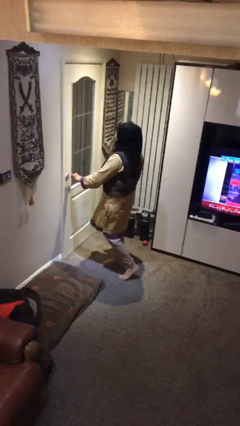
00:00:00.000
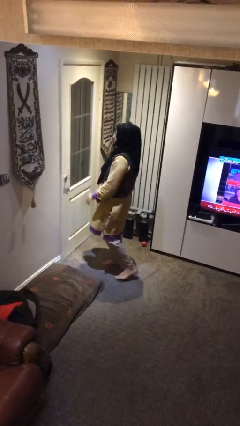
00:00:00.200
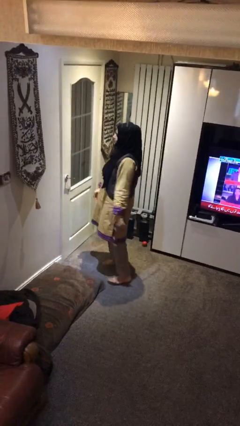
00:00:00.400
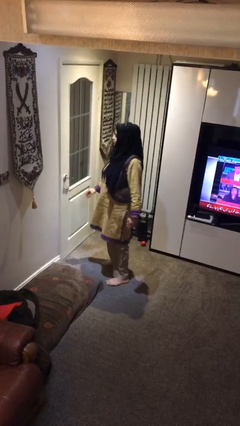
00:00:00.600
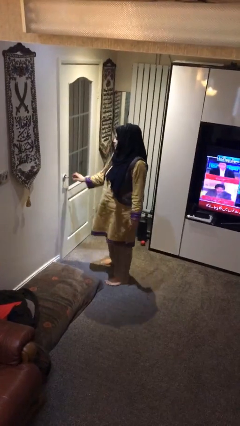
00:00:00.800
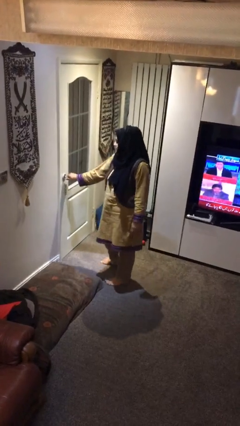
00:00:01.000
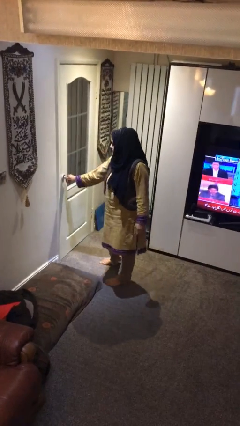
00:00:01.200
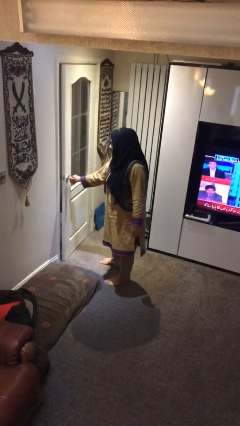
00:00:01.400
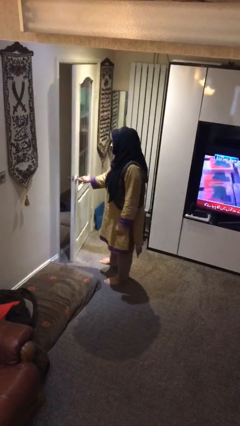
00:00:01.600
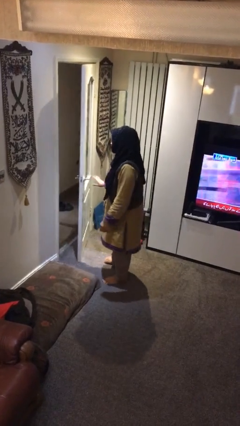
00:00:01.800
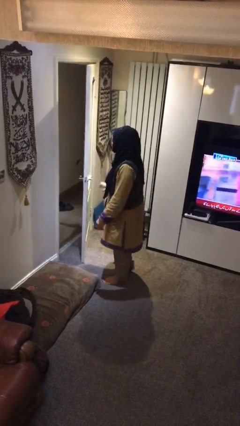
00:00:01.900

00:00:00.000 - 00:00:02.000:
person opens facility door

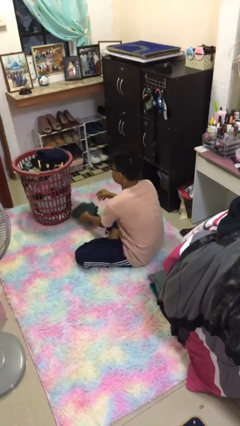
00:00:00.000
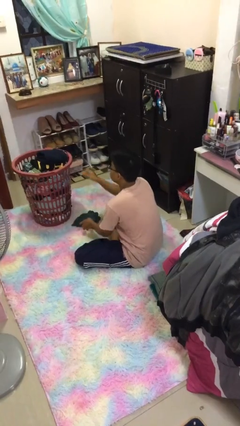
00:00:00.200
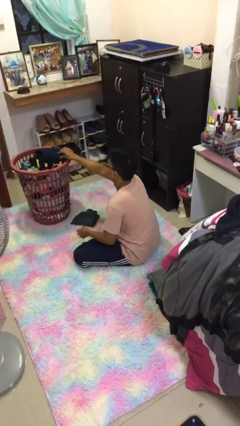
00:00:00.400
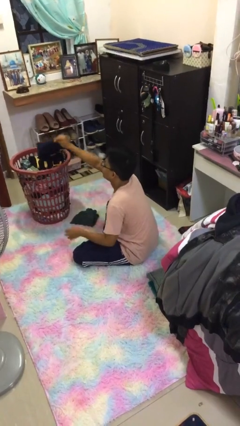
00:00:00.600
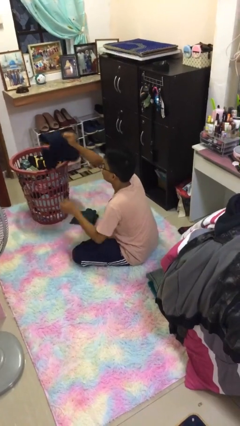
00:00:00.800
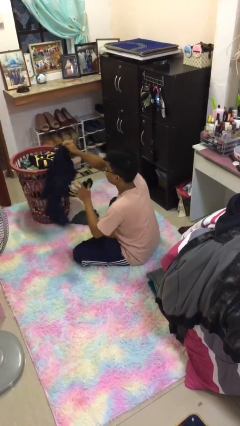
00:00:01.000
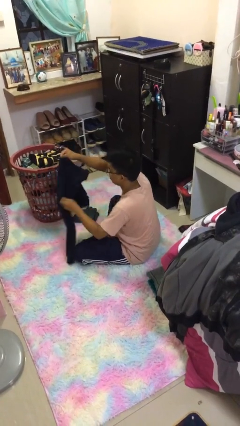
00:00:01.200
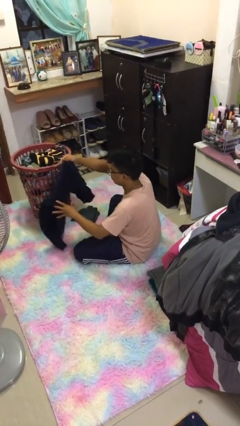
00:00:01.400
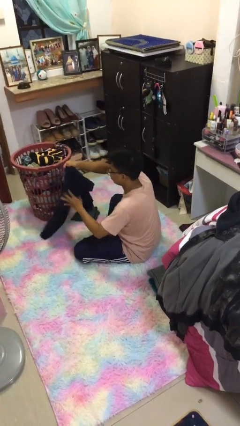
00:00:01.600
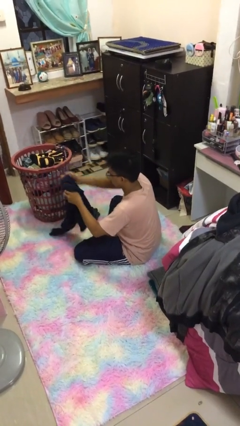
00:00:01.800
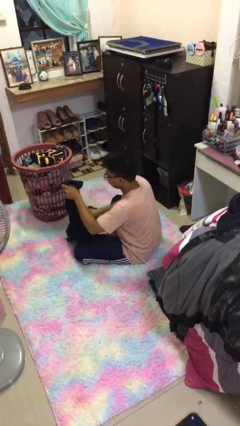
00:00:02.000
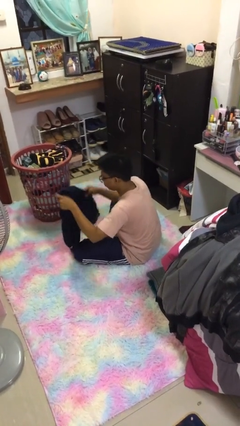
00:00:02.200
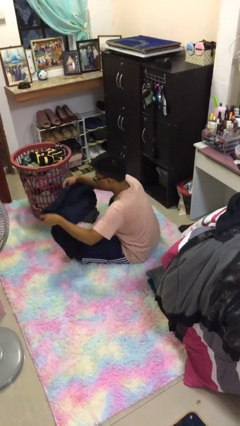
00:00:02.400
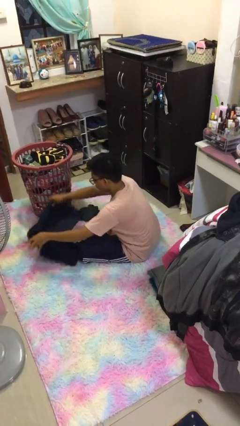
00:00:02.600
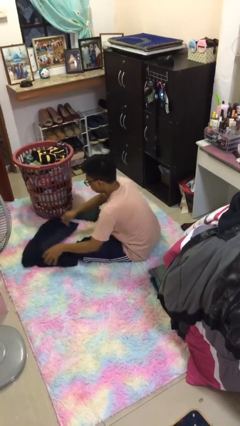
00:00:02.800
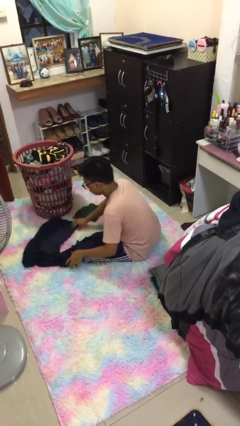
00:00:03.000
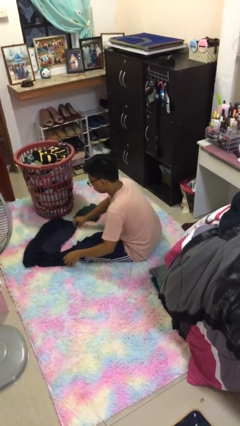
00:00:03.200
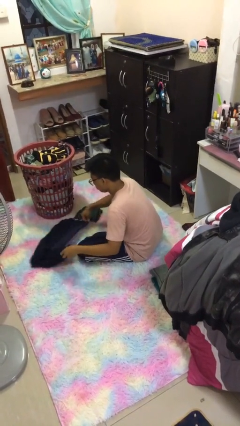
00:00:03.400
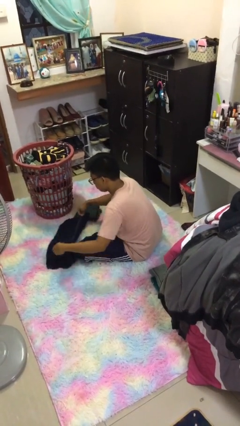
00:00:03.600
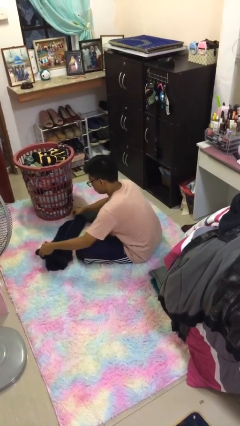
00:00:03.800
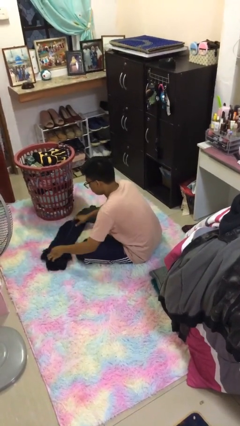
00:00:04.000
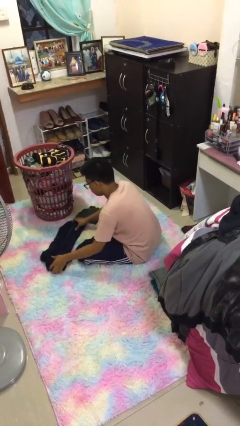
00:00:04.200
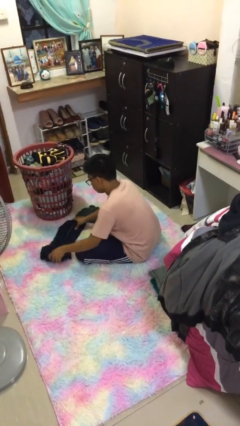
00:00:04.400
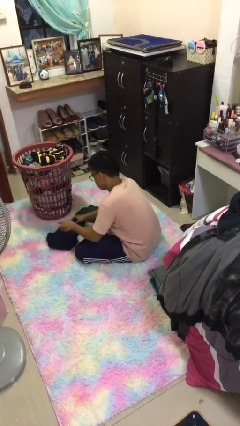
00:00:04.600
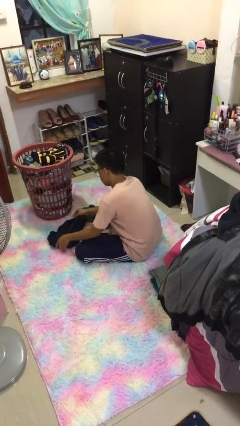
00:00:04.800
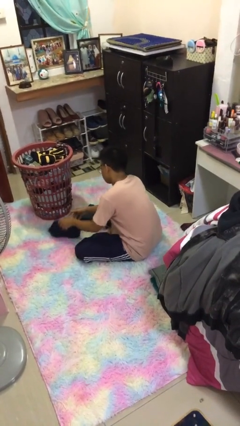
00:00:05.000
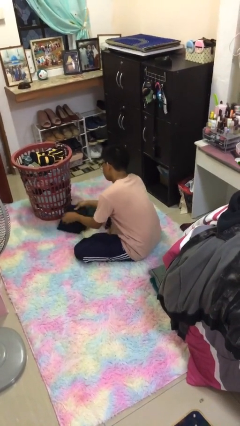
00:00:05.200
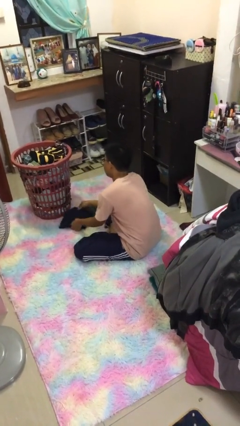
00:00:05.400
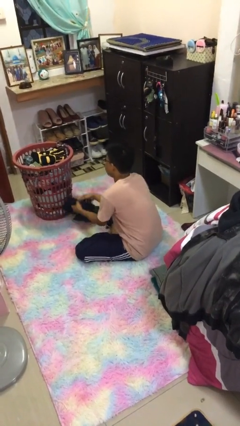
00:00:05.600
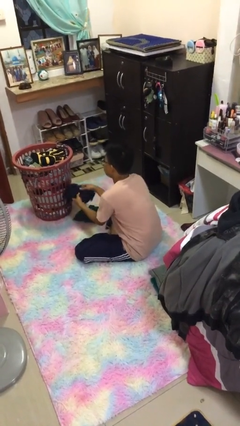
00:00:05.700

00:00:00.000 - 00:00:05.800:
person folds shirt

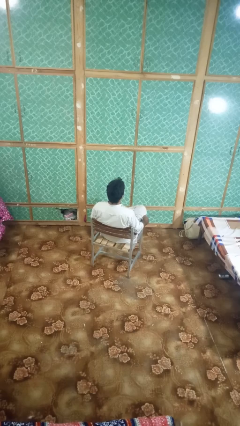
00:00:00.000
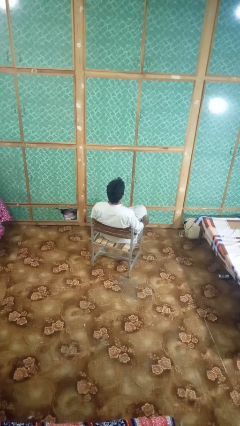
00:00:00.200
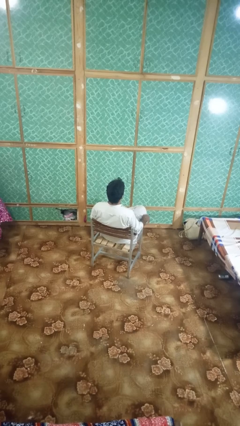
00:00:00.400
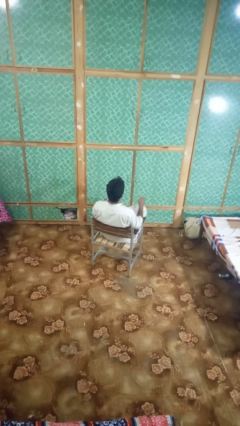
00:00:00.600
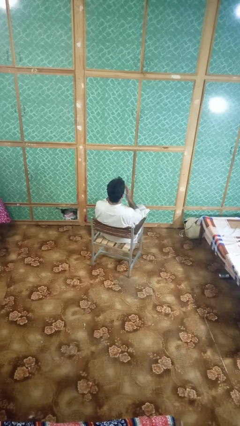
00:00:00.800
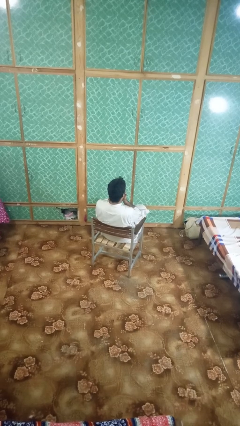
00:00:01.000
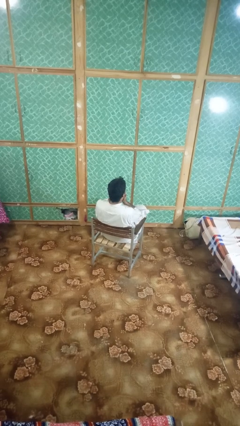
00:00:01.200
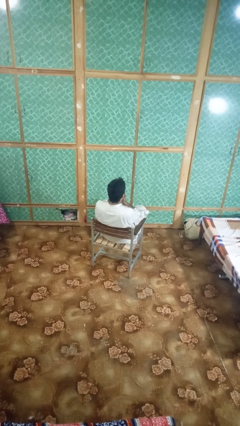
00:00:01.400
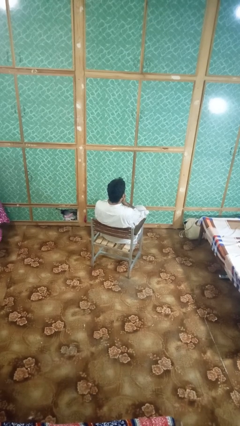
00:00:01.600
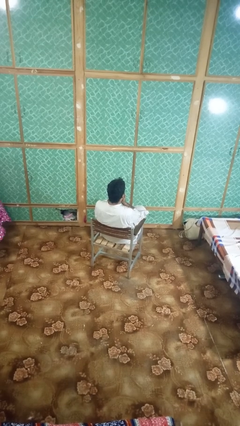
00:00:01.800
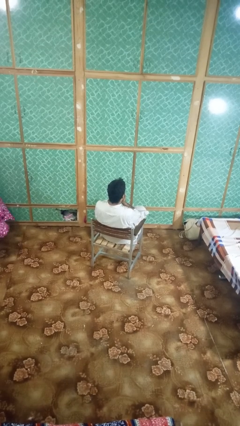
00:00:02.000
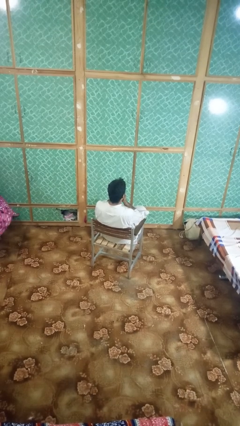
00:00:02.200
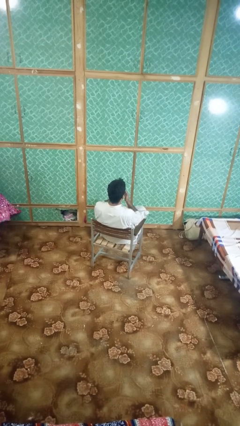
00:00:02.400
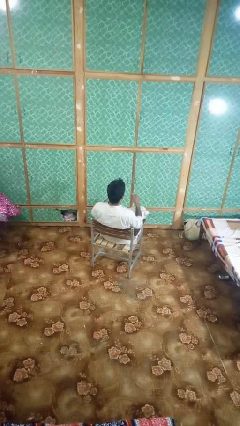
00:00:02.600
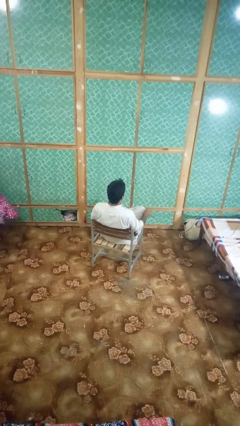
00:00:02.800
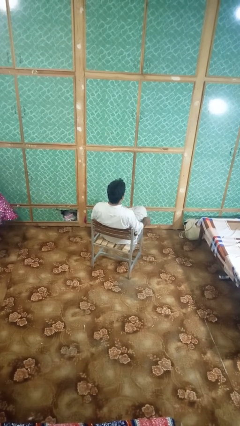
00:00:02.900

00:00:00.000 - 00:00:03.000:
person sneezes into hand

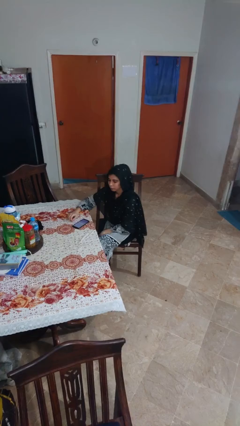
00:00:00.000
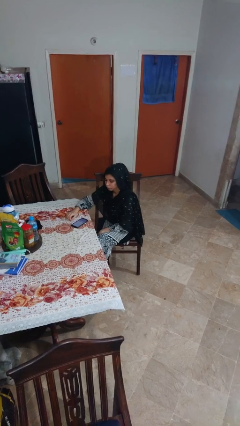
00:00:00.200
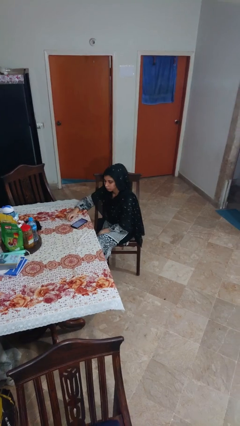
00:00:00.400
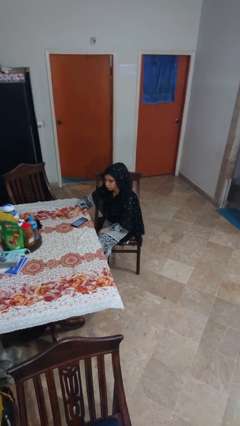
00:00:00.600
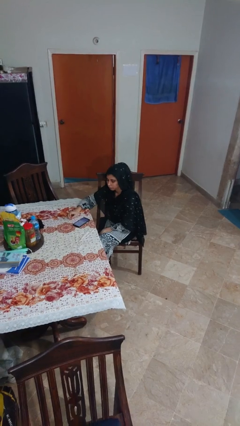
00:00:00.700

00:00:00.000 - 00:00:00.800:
person rubs neck

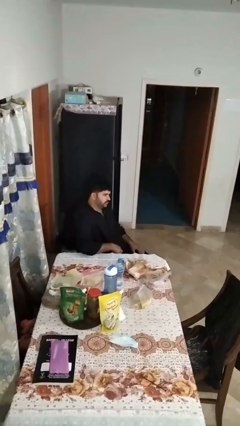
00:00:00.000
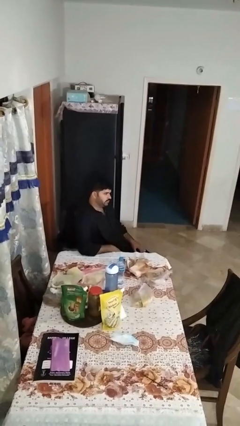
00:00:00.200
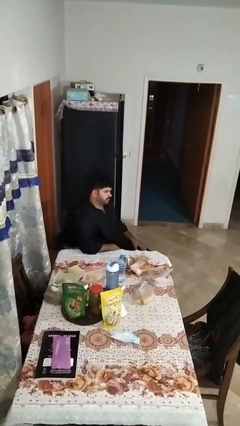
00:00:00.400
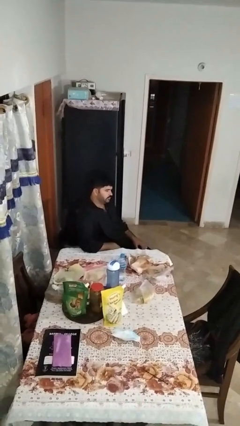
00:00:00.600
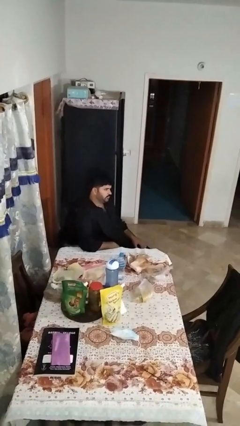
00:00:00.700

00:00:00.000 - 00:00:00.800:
person uses television remote

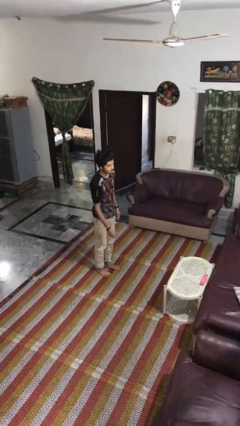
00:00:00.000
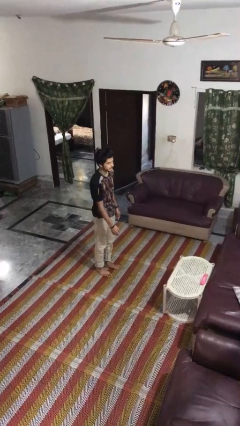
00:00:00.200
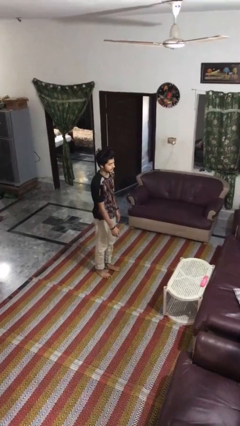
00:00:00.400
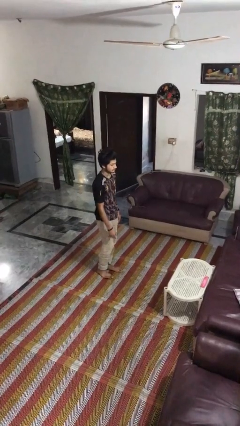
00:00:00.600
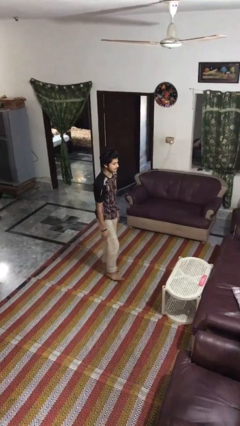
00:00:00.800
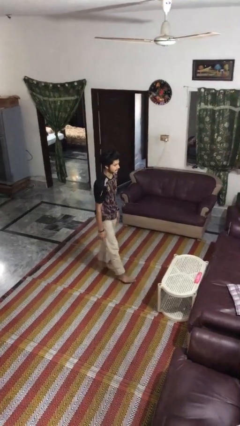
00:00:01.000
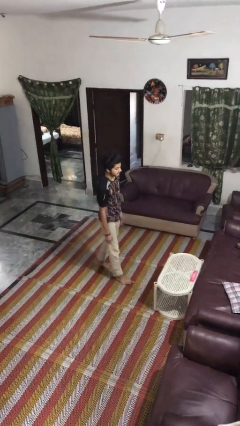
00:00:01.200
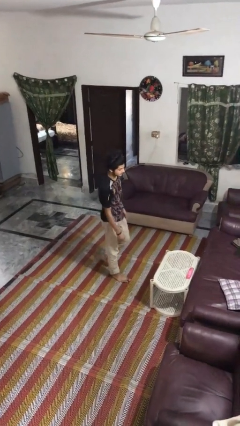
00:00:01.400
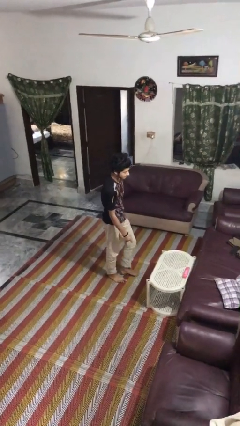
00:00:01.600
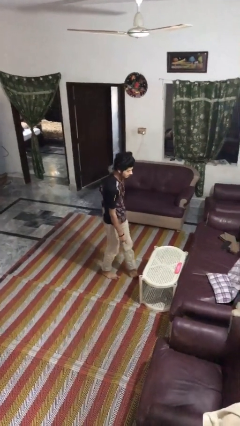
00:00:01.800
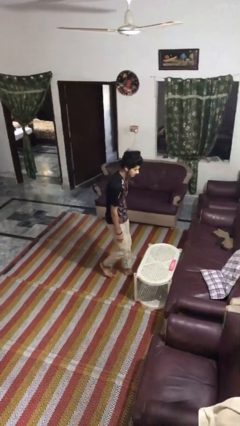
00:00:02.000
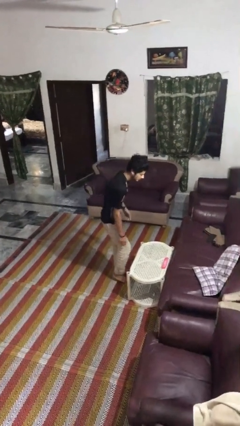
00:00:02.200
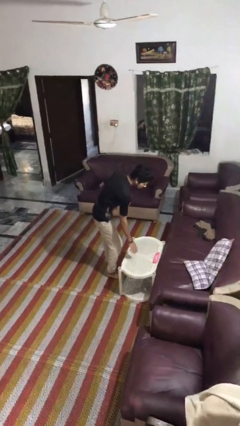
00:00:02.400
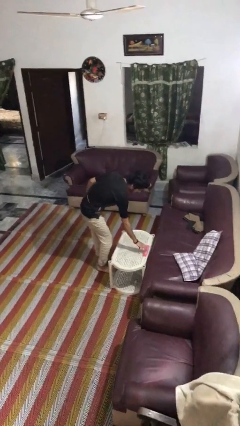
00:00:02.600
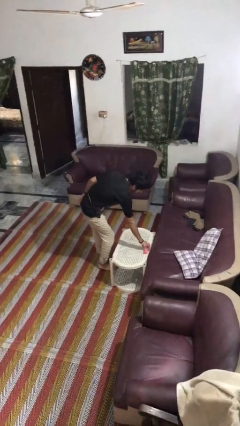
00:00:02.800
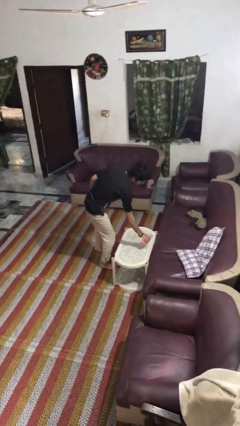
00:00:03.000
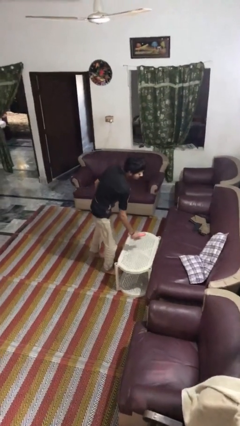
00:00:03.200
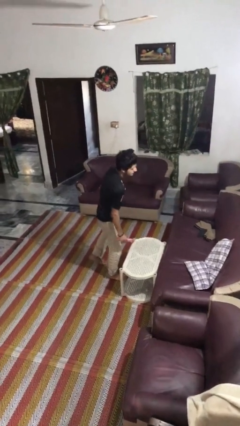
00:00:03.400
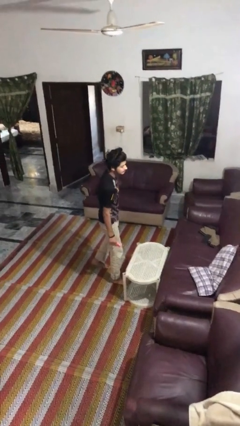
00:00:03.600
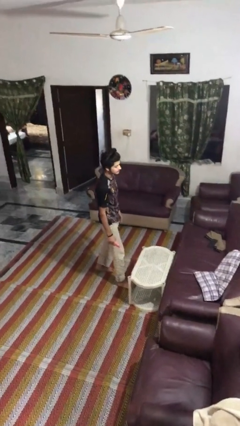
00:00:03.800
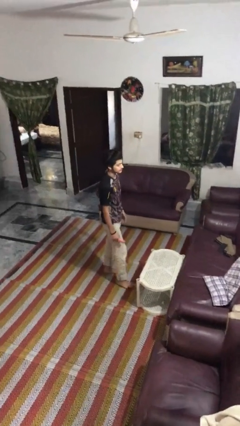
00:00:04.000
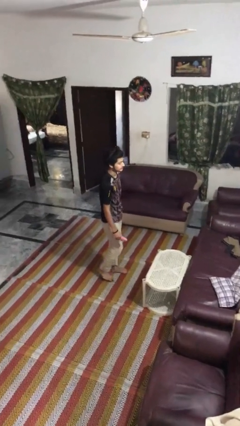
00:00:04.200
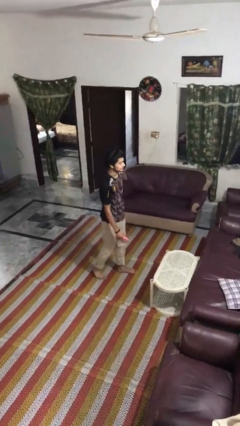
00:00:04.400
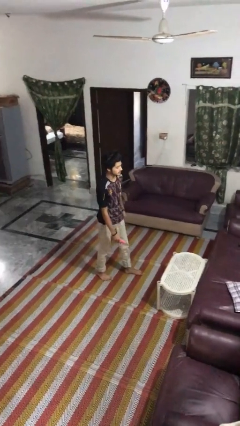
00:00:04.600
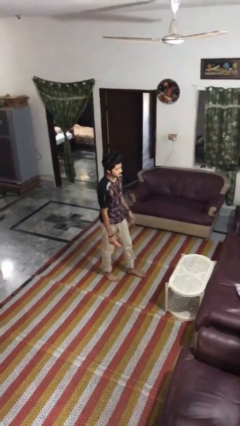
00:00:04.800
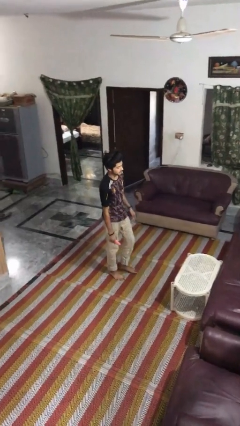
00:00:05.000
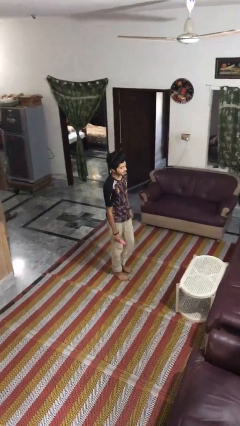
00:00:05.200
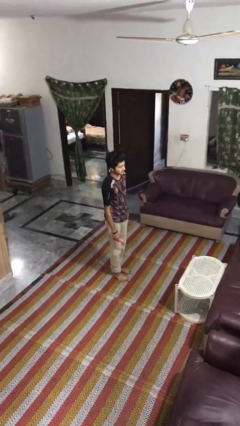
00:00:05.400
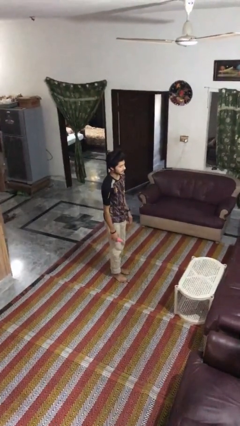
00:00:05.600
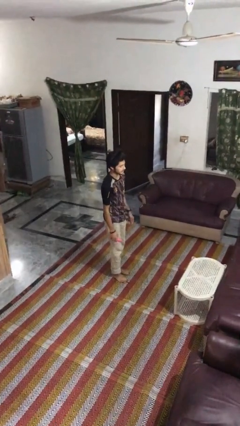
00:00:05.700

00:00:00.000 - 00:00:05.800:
person picks up object from table
